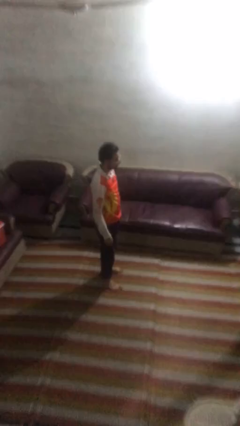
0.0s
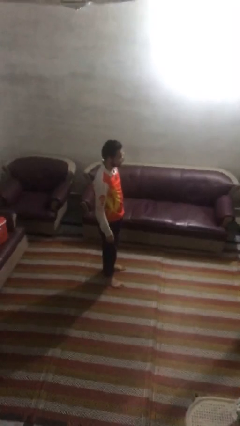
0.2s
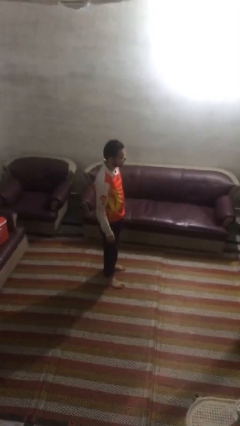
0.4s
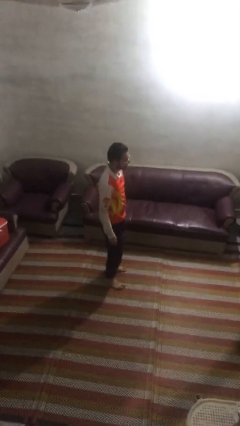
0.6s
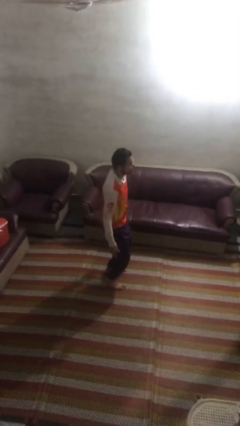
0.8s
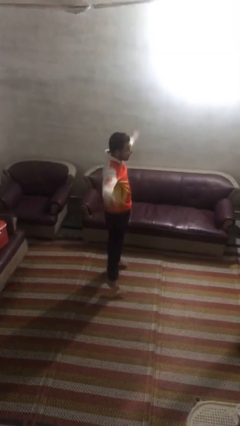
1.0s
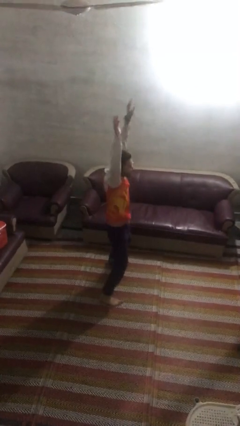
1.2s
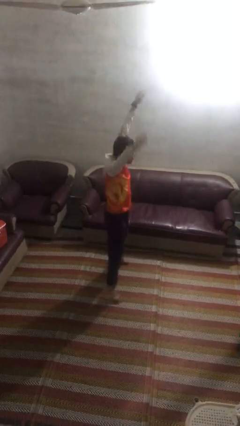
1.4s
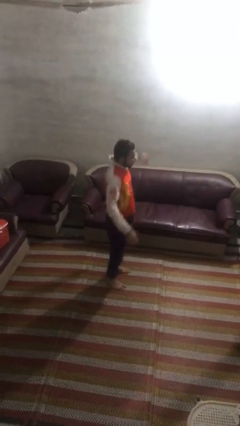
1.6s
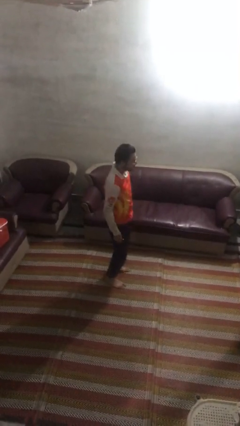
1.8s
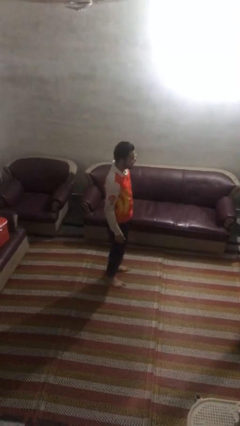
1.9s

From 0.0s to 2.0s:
person exercises with jumping jacks

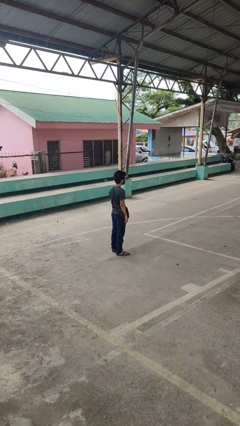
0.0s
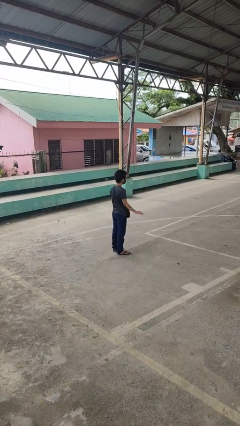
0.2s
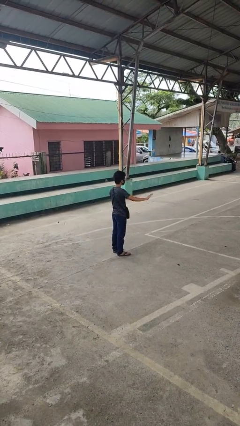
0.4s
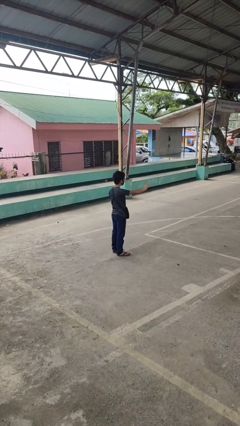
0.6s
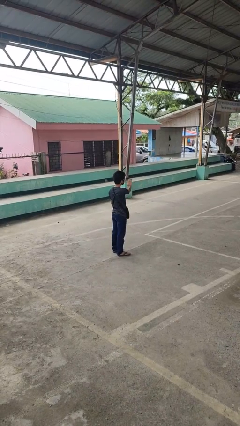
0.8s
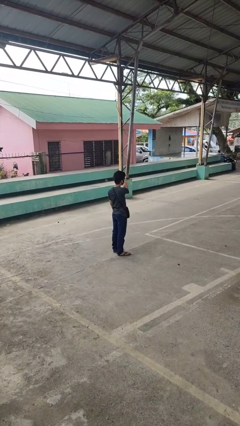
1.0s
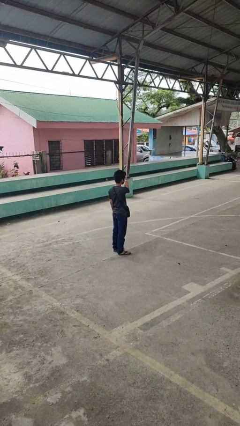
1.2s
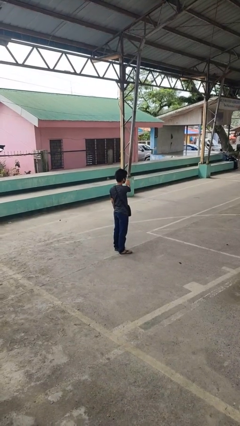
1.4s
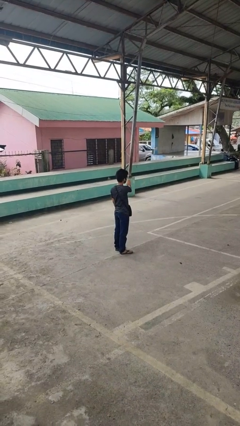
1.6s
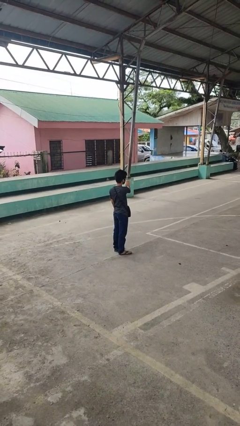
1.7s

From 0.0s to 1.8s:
person gestures swipe left

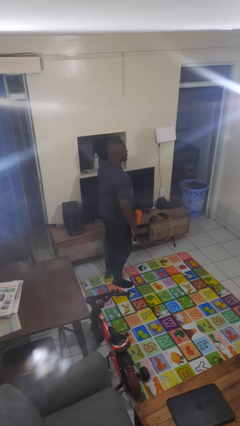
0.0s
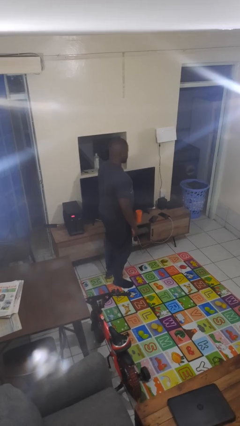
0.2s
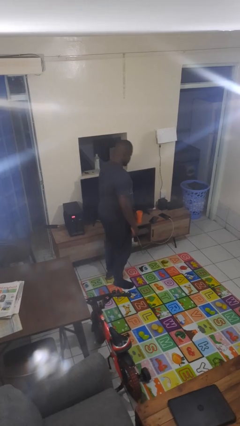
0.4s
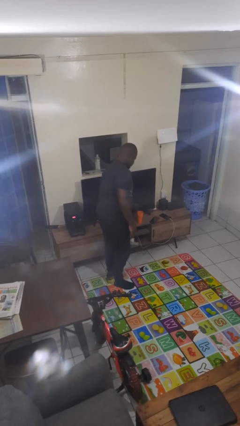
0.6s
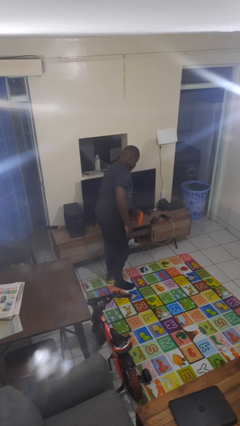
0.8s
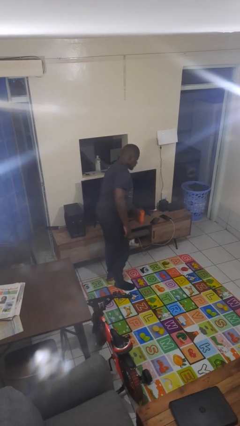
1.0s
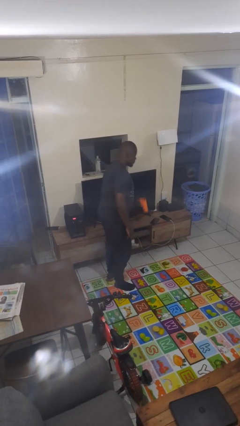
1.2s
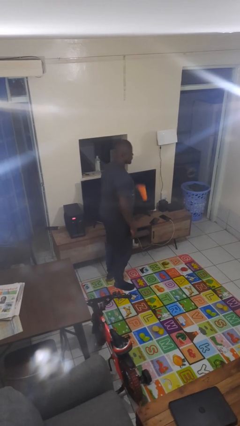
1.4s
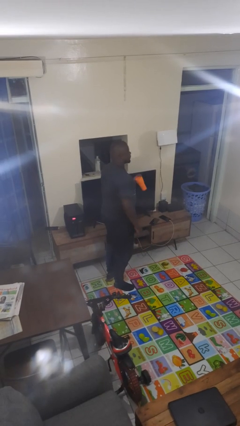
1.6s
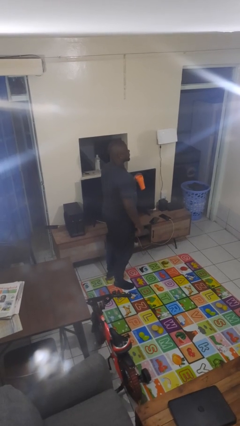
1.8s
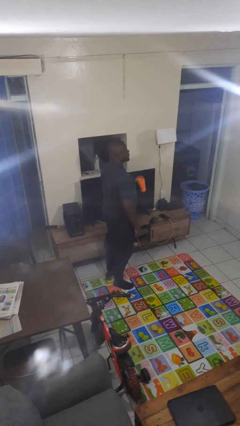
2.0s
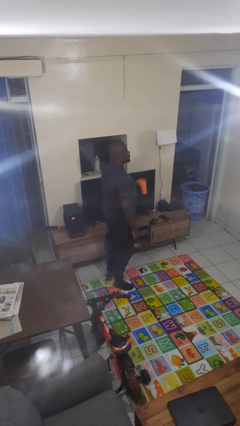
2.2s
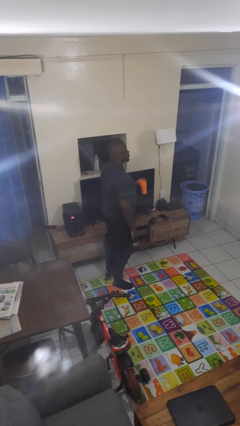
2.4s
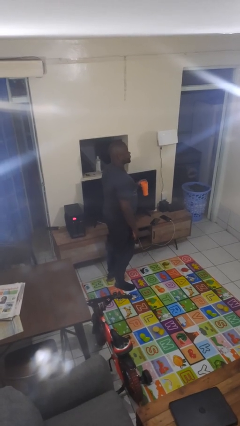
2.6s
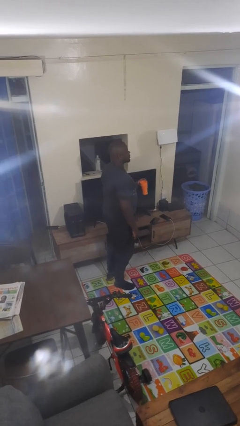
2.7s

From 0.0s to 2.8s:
person picks up object from countertop

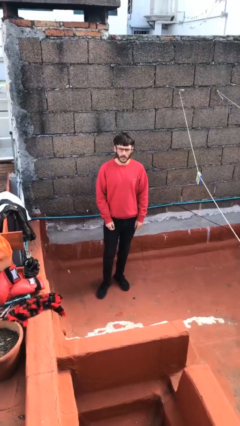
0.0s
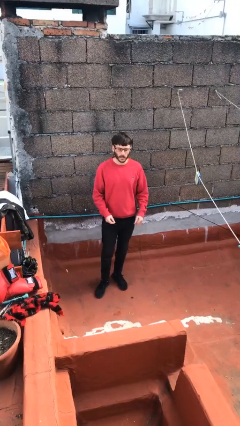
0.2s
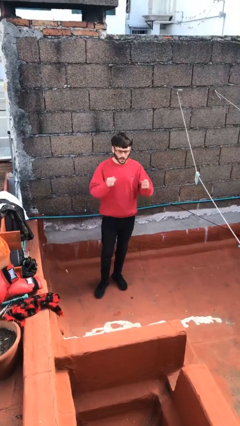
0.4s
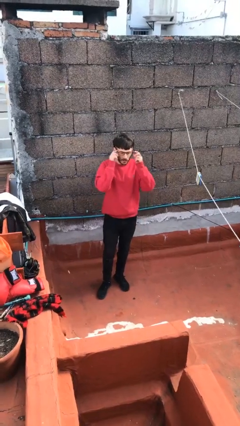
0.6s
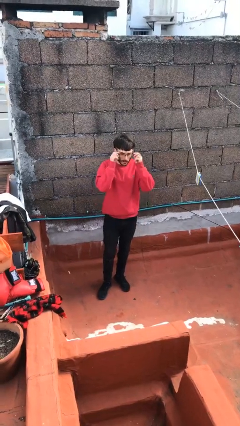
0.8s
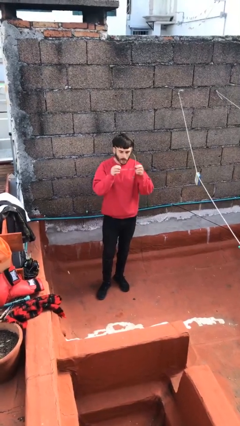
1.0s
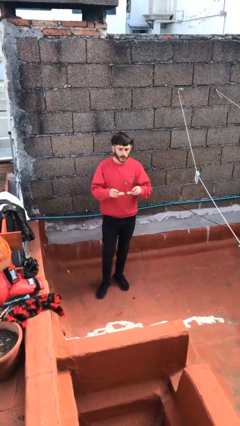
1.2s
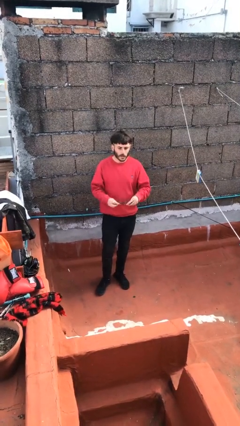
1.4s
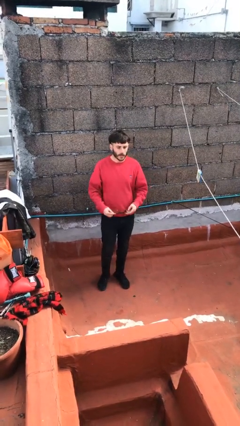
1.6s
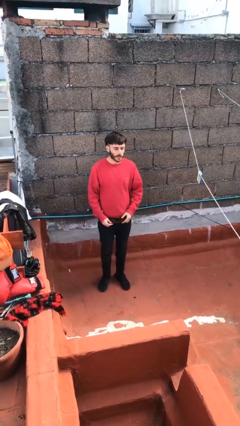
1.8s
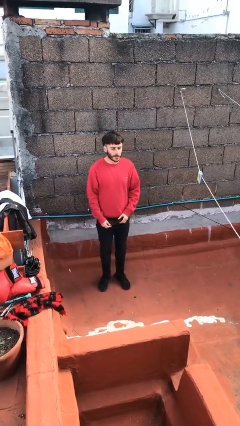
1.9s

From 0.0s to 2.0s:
person takes off glasses

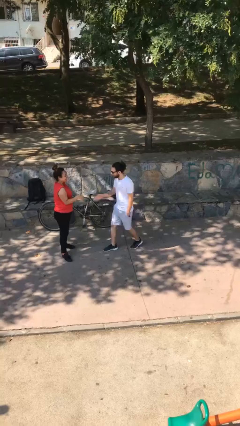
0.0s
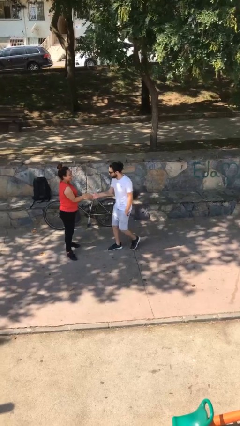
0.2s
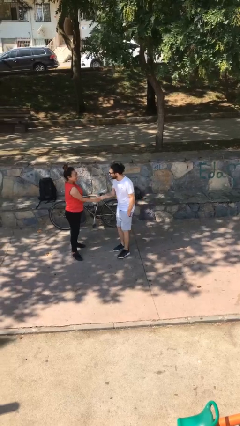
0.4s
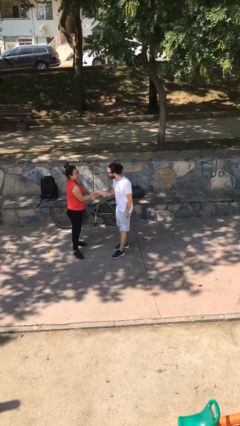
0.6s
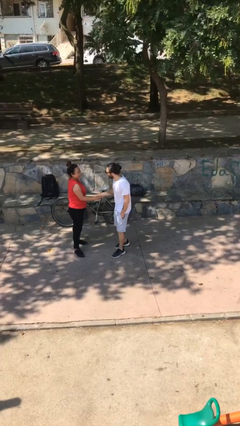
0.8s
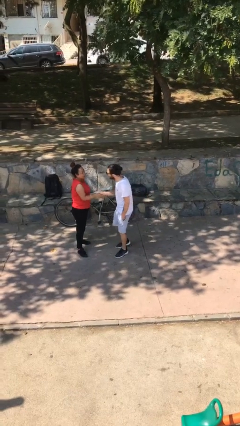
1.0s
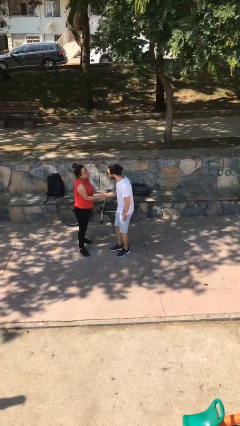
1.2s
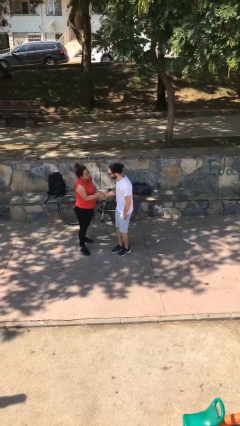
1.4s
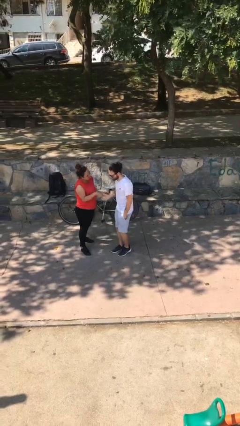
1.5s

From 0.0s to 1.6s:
person shakes hand

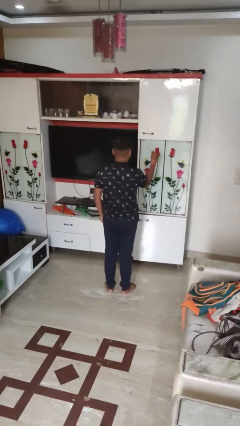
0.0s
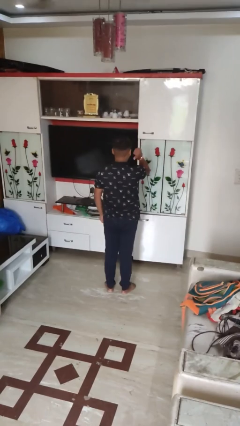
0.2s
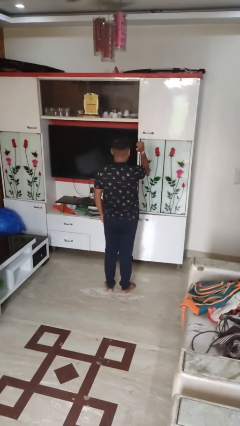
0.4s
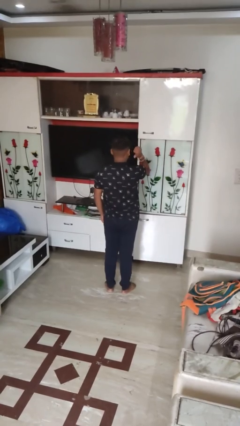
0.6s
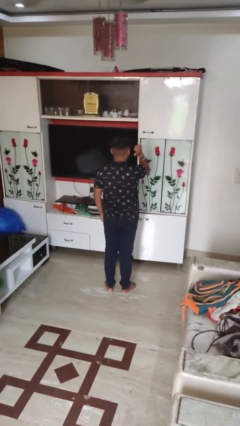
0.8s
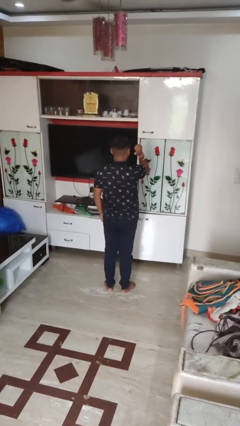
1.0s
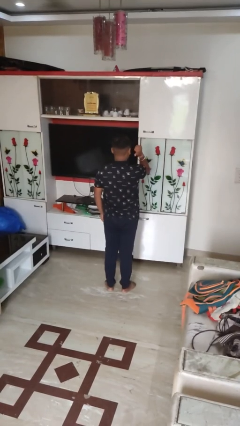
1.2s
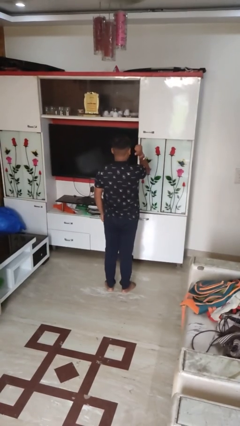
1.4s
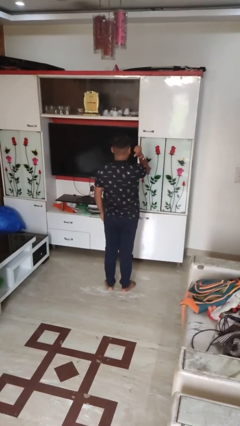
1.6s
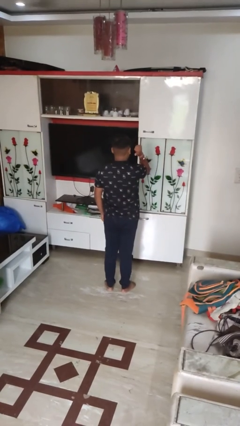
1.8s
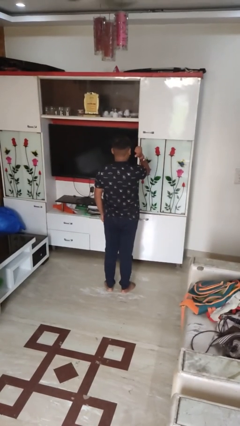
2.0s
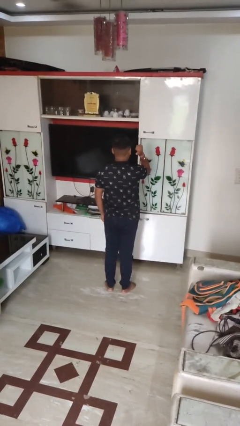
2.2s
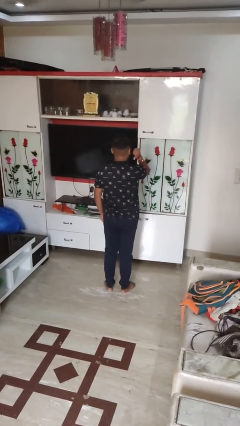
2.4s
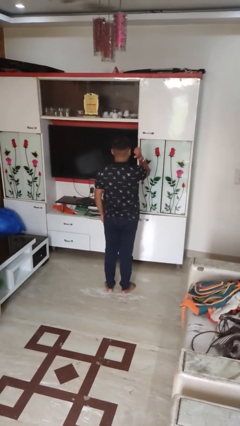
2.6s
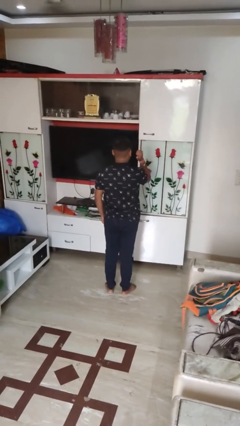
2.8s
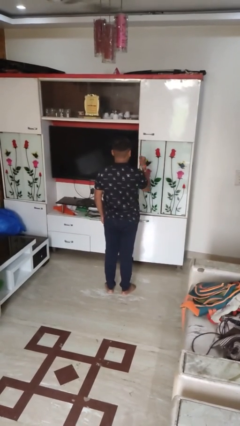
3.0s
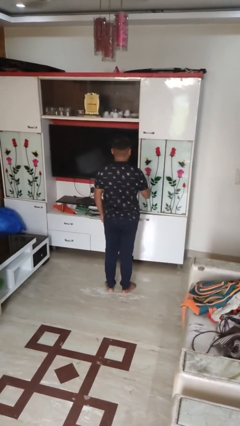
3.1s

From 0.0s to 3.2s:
person gestures behind me

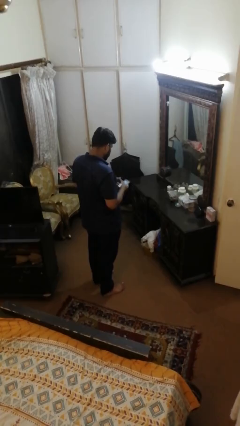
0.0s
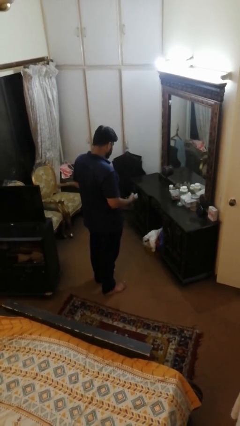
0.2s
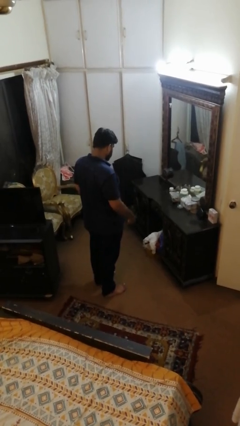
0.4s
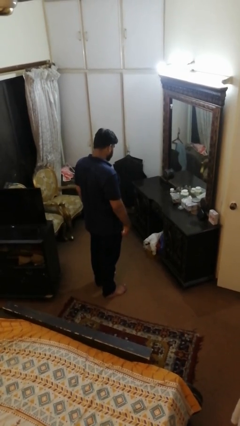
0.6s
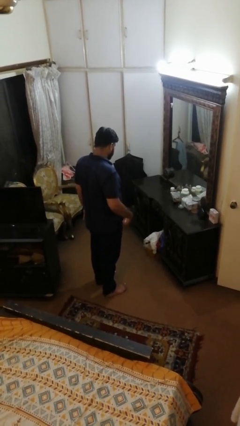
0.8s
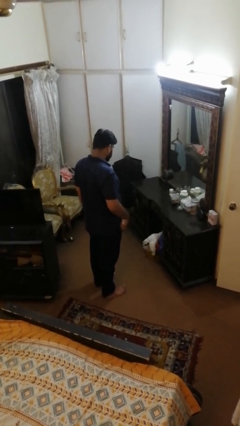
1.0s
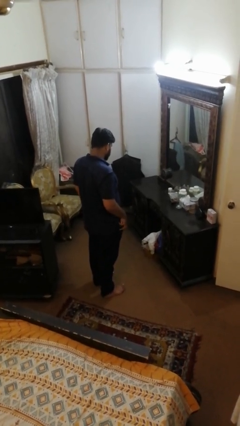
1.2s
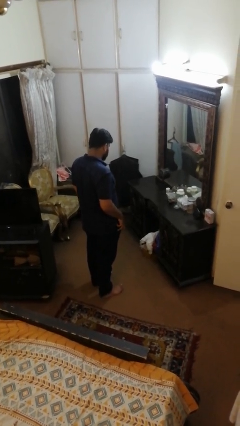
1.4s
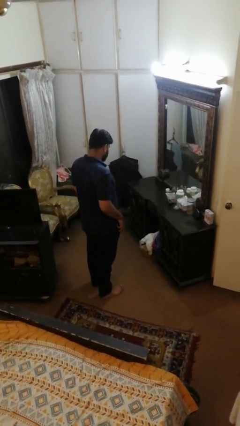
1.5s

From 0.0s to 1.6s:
person puts phone into pocket

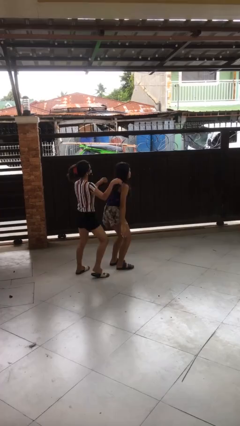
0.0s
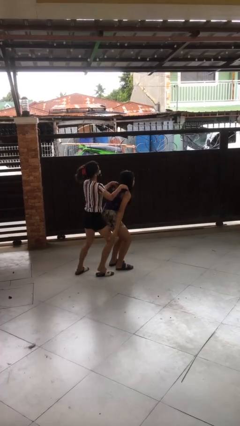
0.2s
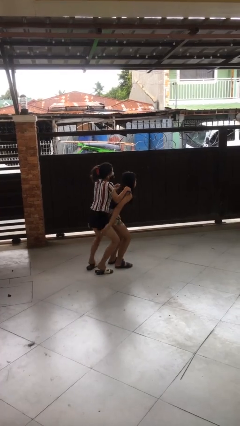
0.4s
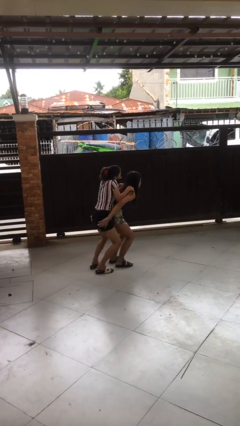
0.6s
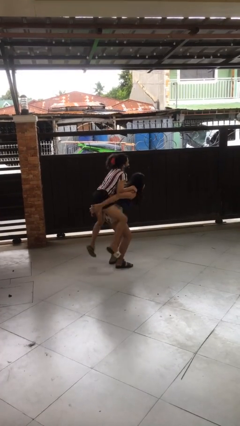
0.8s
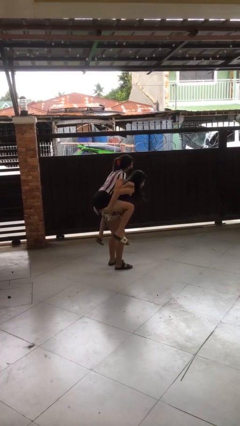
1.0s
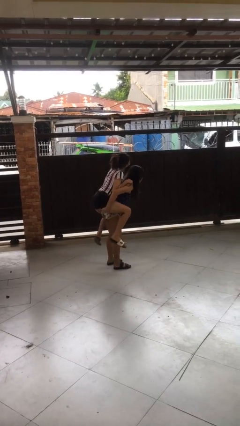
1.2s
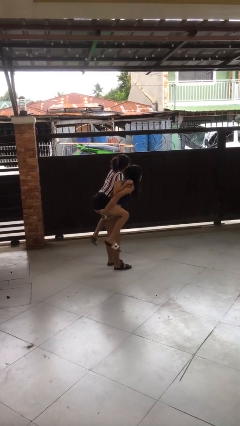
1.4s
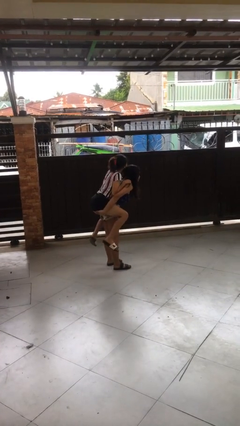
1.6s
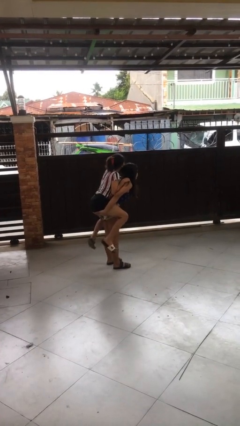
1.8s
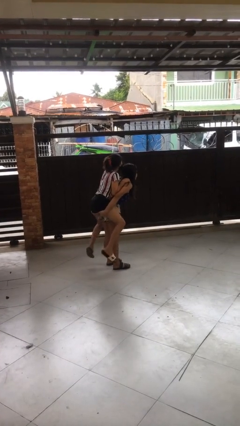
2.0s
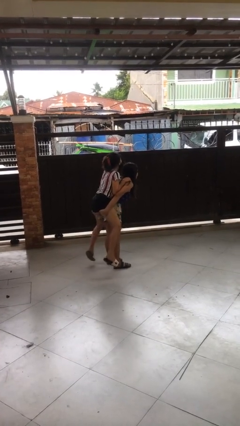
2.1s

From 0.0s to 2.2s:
person carries person over shoulder
